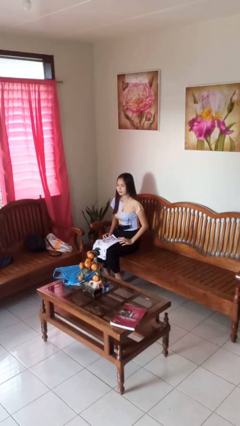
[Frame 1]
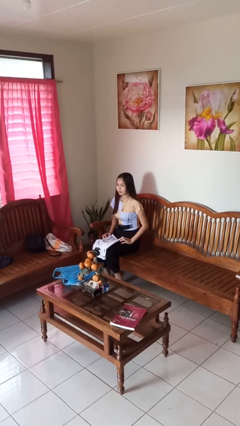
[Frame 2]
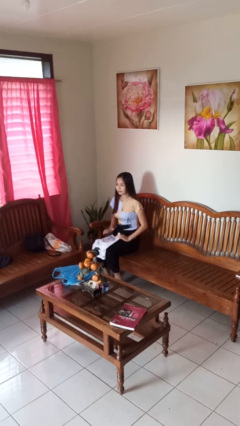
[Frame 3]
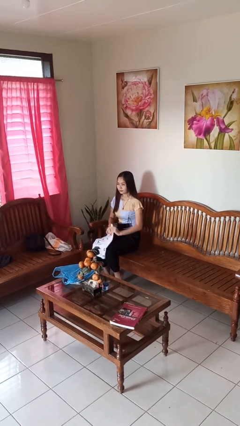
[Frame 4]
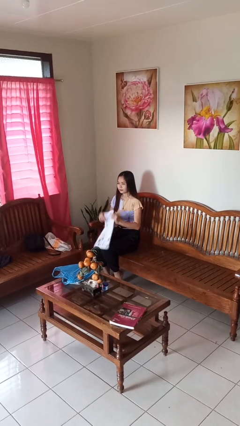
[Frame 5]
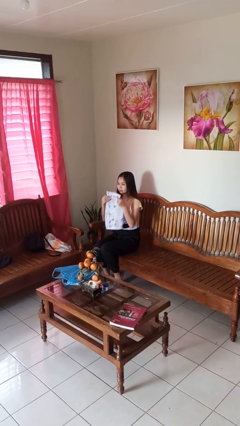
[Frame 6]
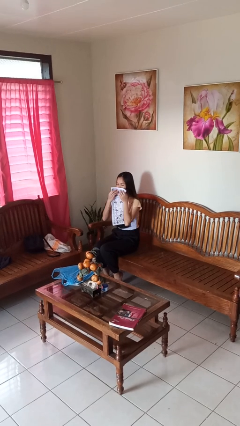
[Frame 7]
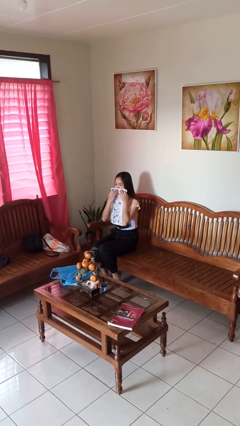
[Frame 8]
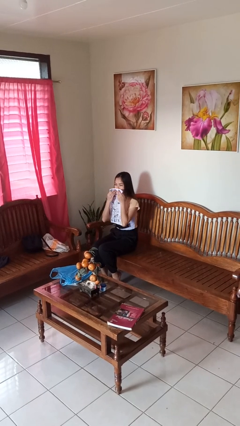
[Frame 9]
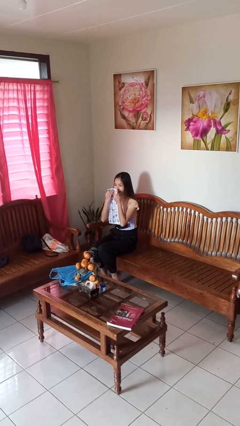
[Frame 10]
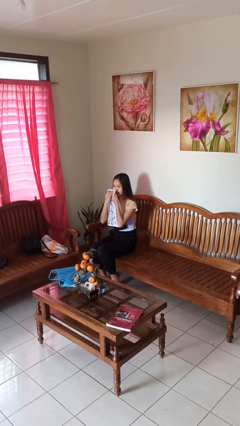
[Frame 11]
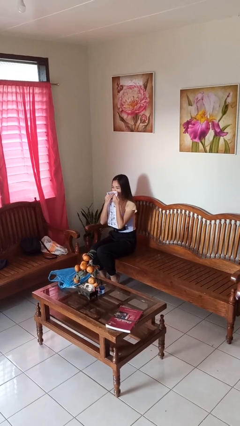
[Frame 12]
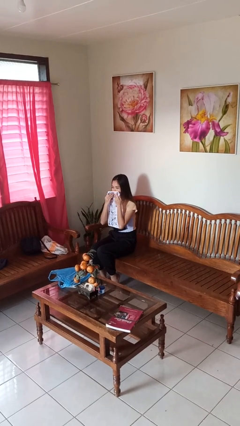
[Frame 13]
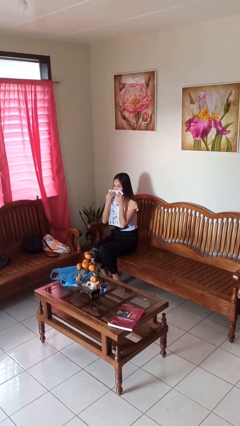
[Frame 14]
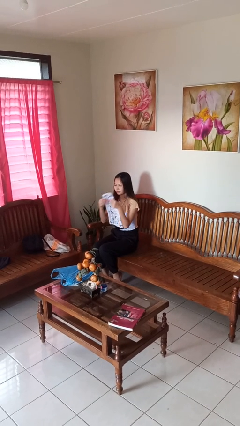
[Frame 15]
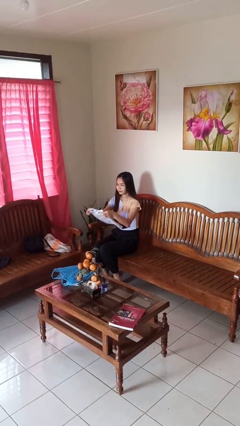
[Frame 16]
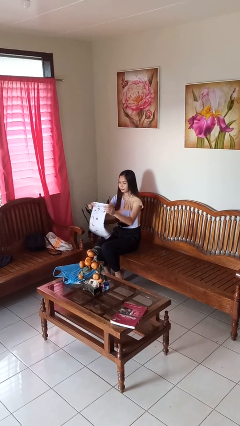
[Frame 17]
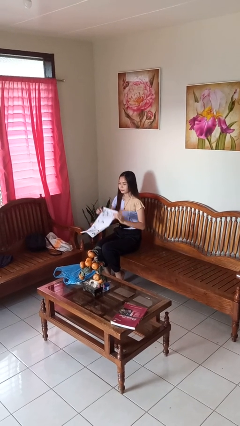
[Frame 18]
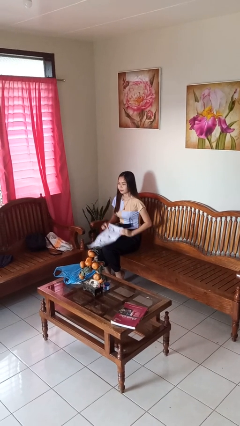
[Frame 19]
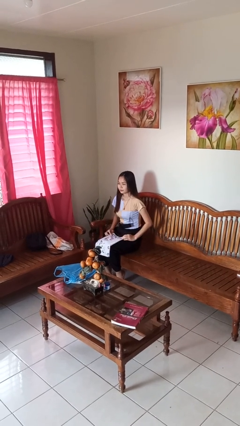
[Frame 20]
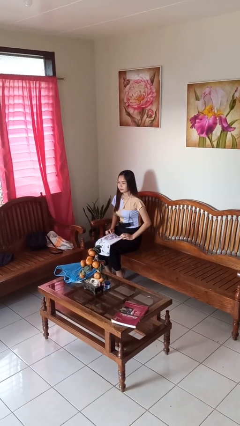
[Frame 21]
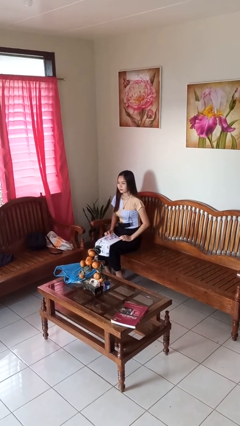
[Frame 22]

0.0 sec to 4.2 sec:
person wipes mouth with napkin

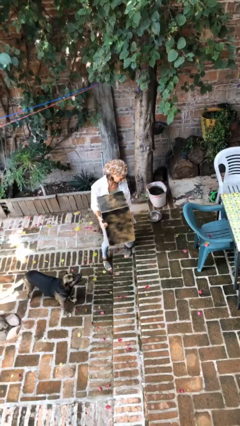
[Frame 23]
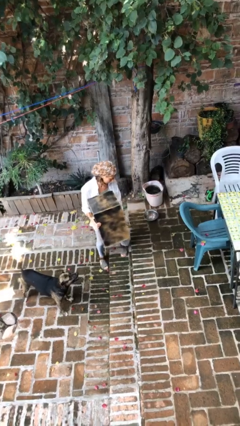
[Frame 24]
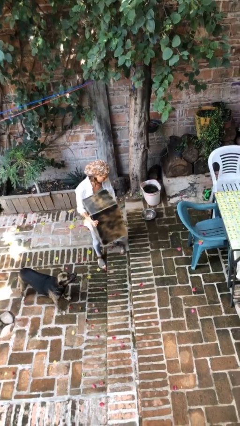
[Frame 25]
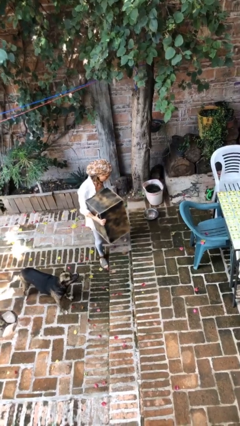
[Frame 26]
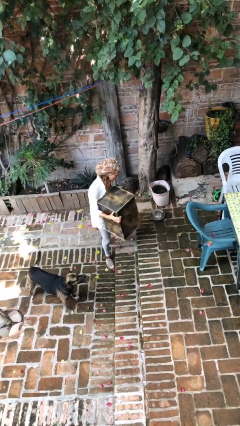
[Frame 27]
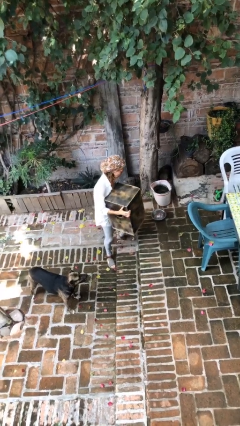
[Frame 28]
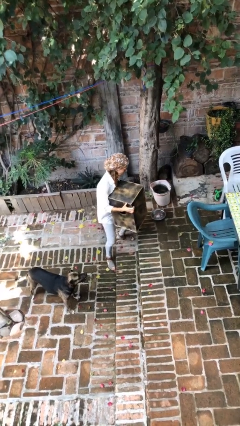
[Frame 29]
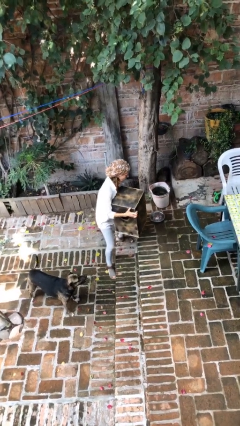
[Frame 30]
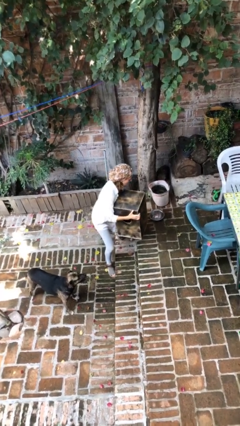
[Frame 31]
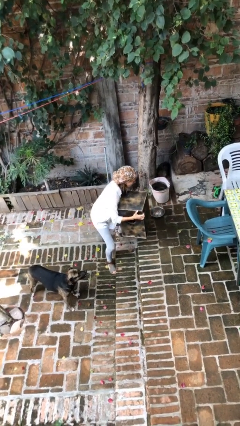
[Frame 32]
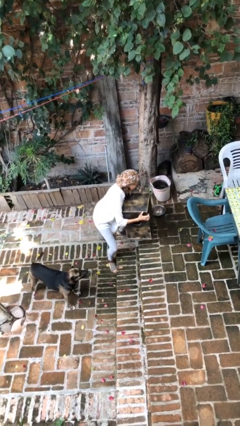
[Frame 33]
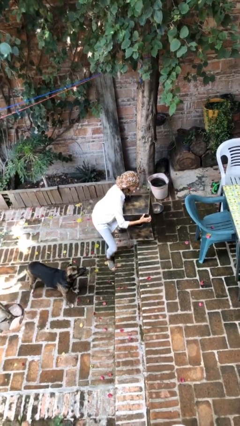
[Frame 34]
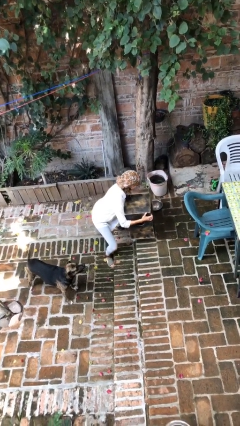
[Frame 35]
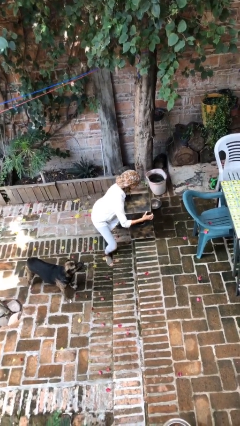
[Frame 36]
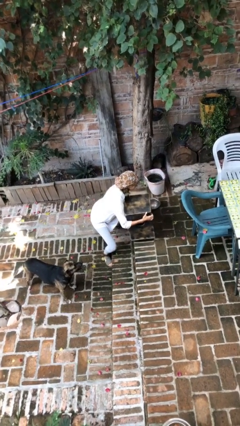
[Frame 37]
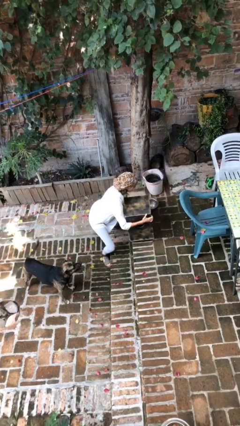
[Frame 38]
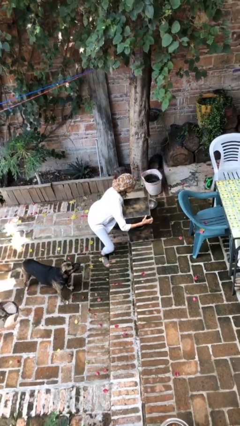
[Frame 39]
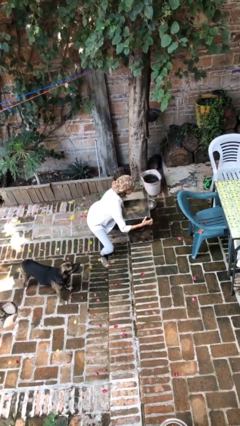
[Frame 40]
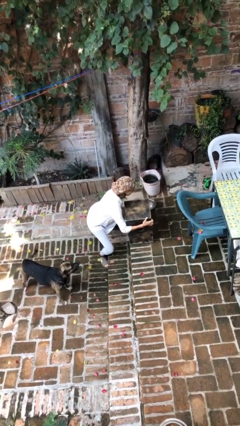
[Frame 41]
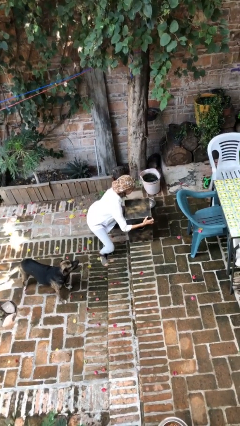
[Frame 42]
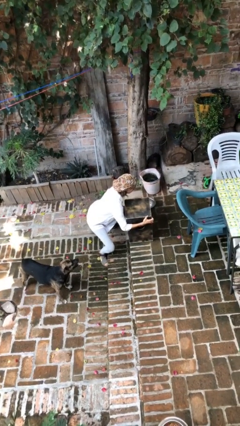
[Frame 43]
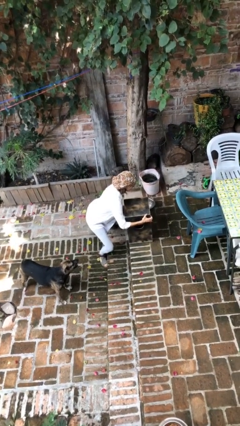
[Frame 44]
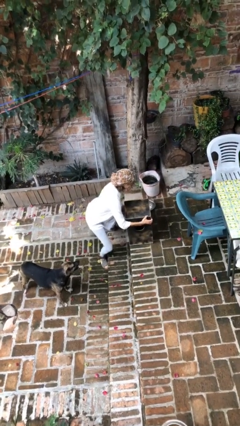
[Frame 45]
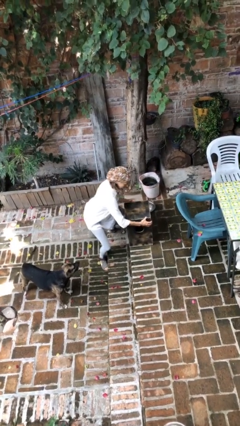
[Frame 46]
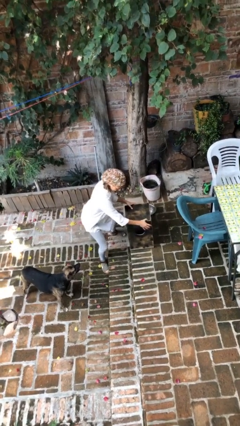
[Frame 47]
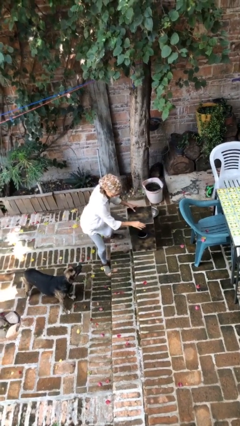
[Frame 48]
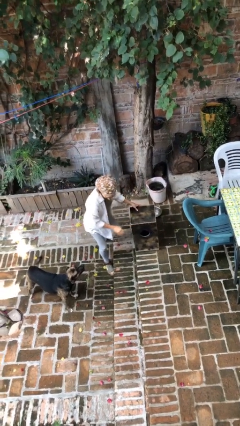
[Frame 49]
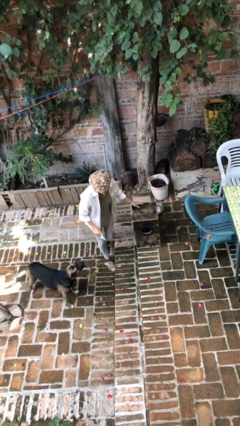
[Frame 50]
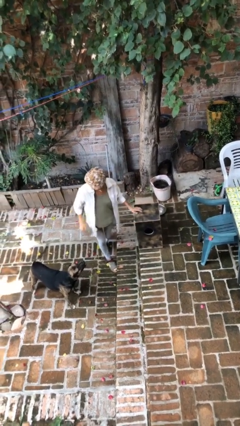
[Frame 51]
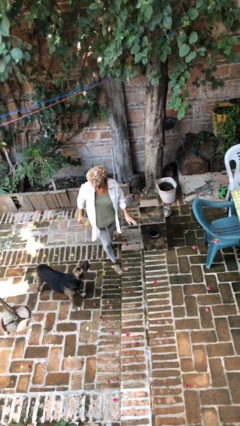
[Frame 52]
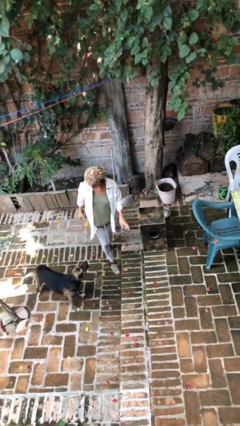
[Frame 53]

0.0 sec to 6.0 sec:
person puts down object on floor

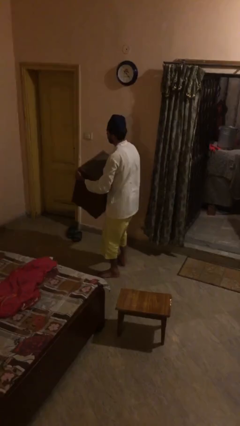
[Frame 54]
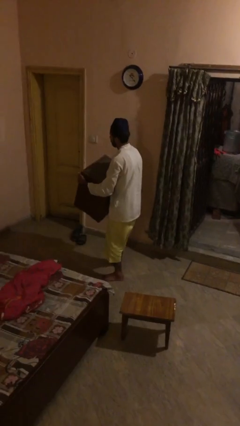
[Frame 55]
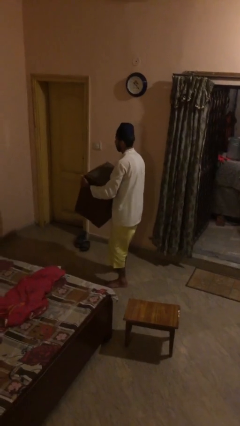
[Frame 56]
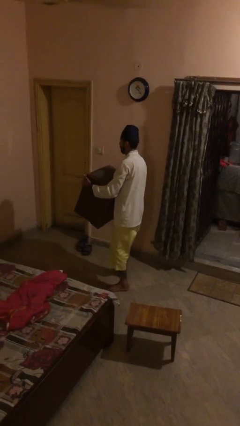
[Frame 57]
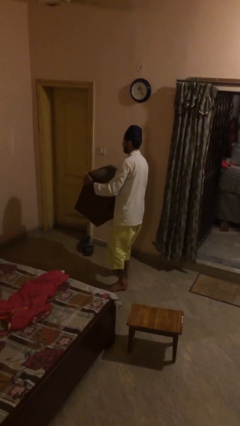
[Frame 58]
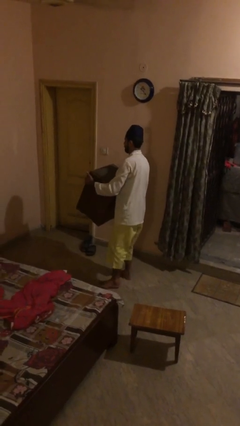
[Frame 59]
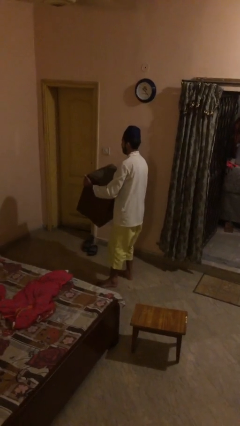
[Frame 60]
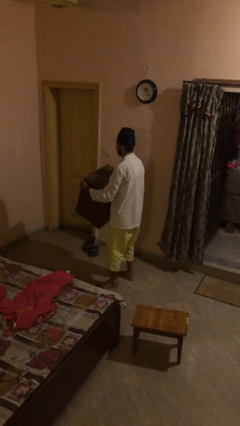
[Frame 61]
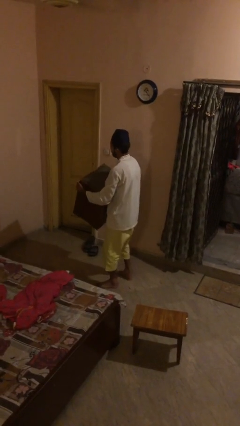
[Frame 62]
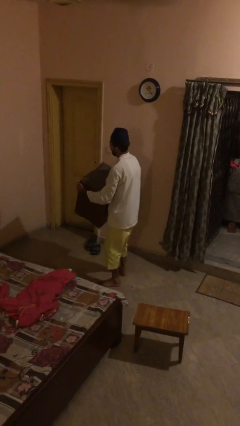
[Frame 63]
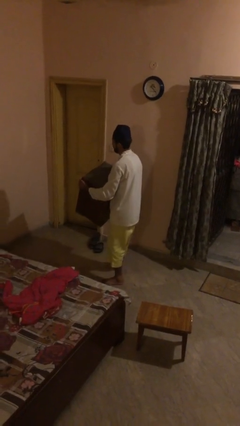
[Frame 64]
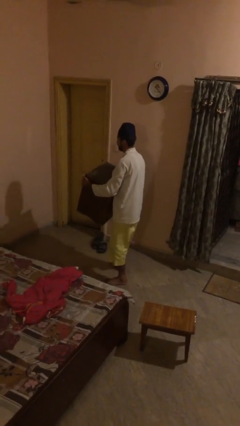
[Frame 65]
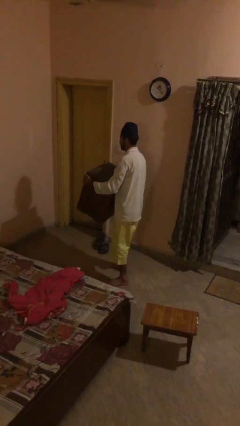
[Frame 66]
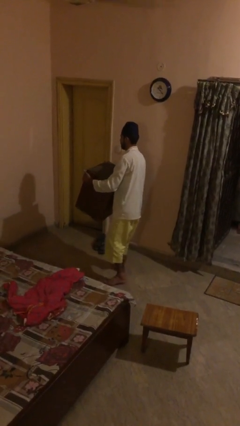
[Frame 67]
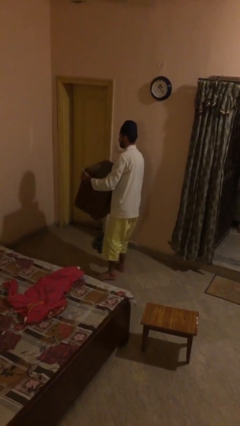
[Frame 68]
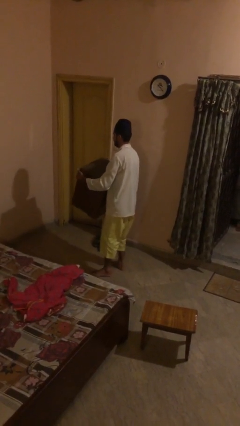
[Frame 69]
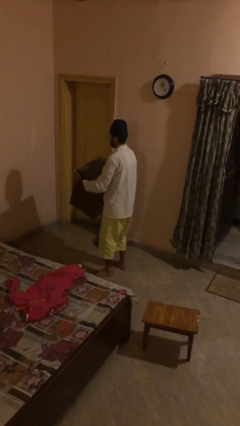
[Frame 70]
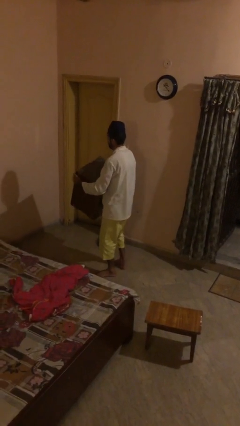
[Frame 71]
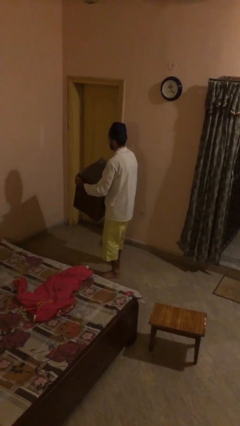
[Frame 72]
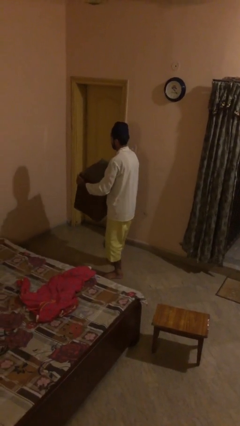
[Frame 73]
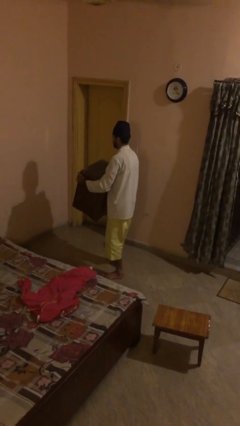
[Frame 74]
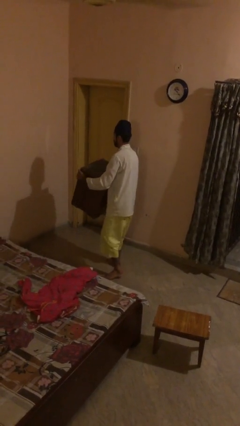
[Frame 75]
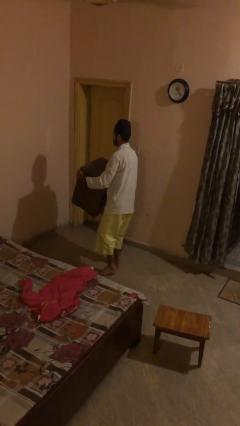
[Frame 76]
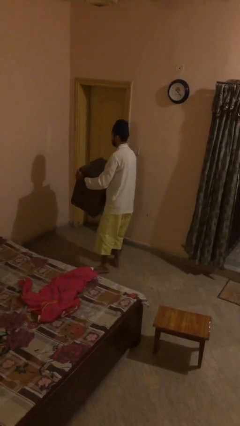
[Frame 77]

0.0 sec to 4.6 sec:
person carries heavy object

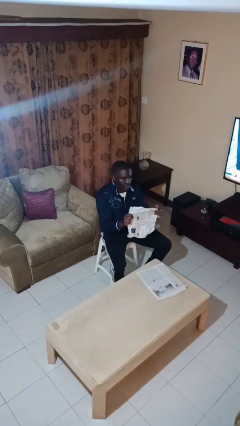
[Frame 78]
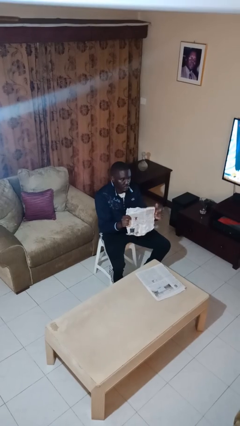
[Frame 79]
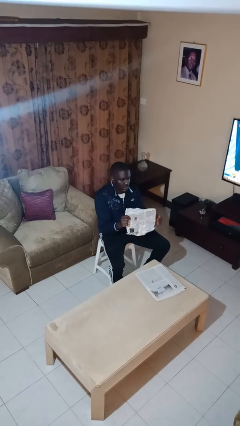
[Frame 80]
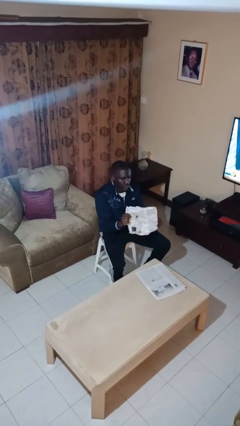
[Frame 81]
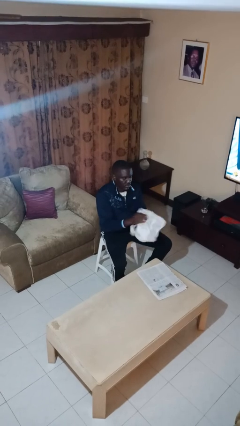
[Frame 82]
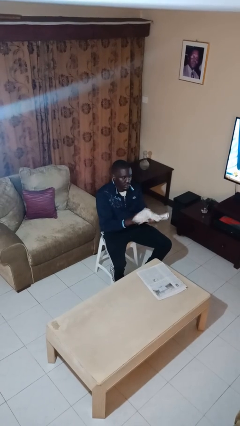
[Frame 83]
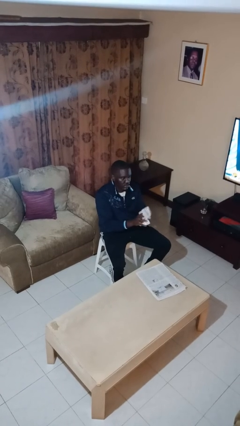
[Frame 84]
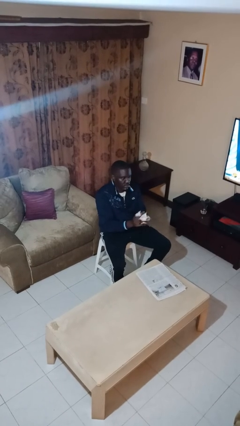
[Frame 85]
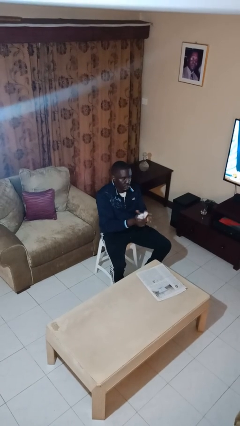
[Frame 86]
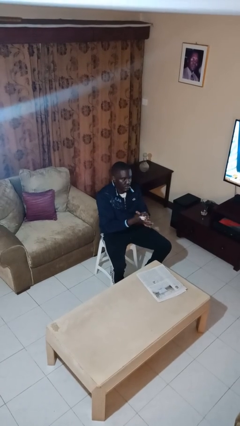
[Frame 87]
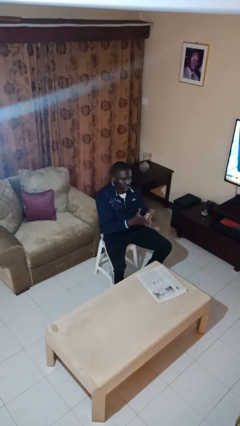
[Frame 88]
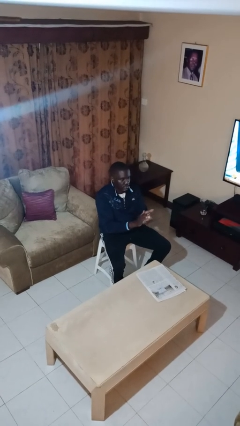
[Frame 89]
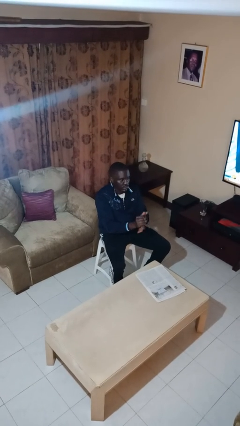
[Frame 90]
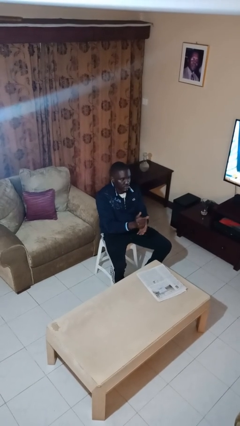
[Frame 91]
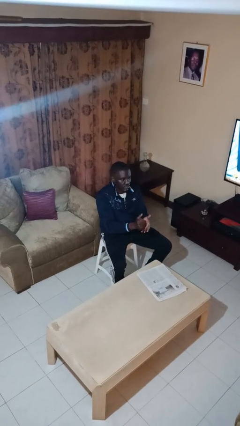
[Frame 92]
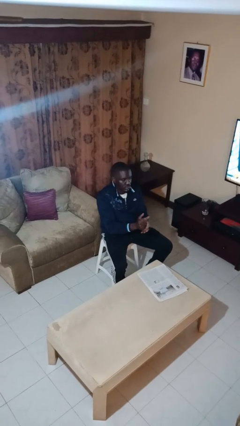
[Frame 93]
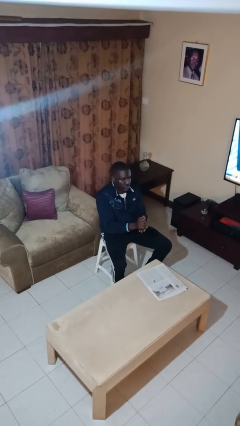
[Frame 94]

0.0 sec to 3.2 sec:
person crumples paper
